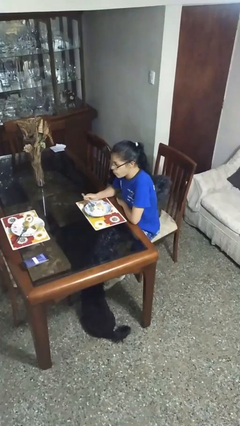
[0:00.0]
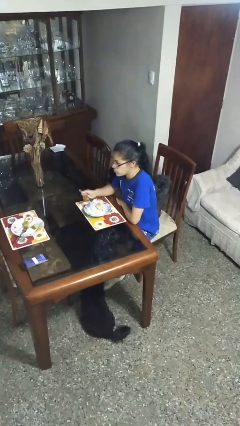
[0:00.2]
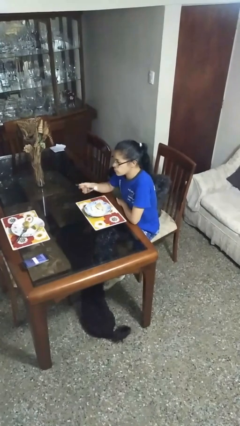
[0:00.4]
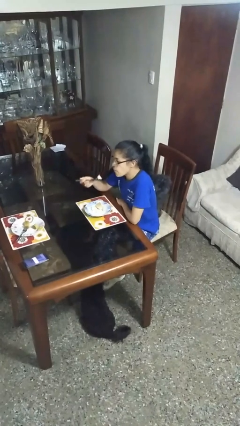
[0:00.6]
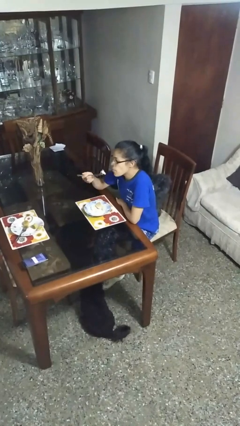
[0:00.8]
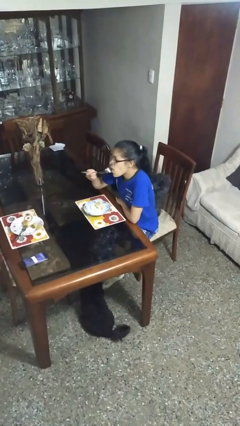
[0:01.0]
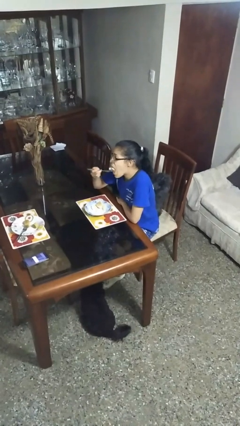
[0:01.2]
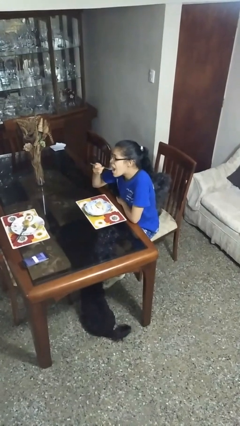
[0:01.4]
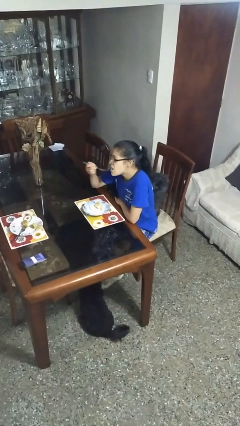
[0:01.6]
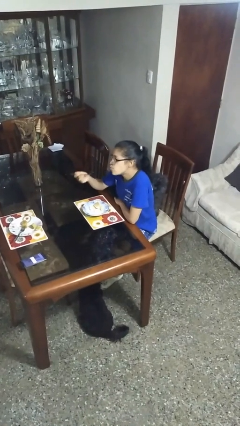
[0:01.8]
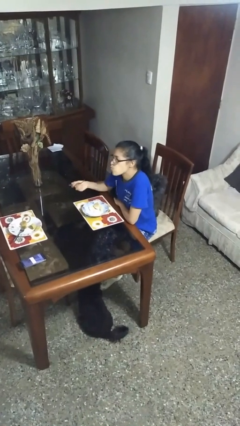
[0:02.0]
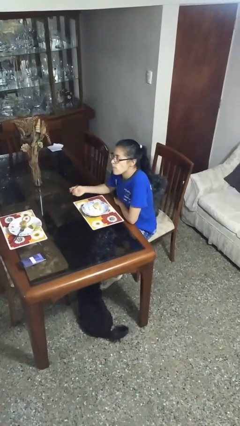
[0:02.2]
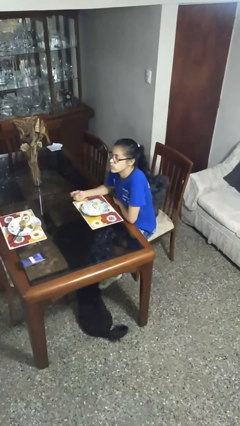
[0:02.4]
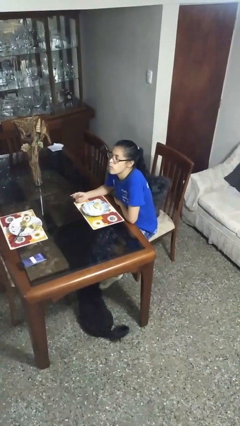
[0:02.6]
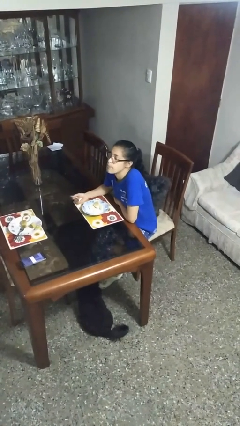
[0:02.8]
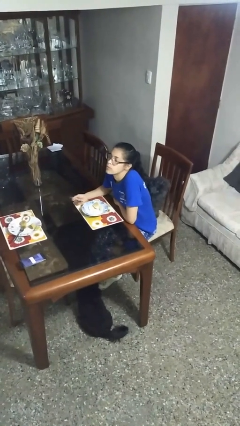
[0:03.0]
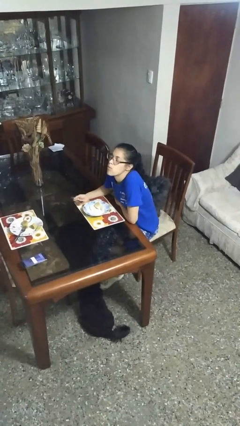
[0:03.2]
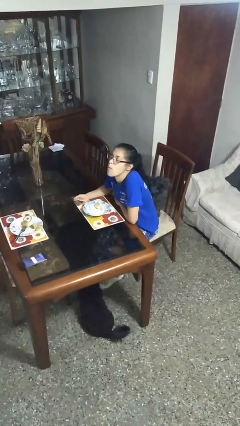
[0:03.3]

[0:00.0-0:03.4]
person eats with utensil

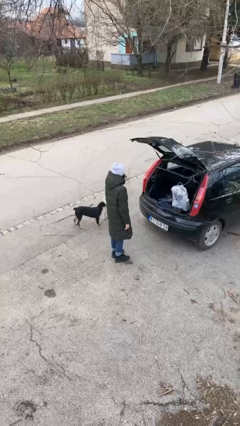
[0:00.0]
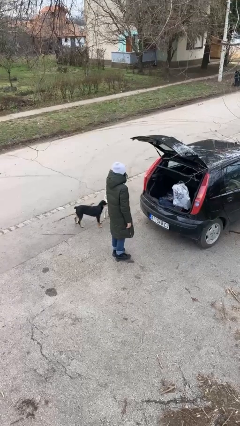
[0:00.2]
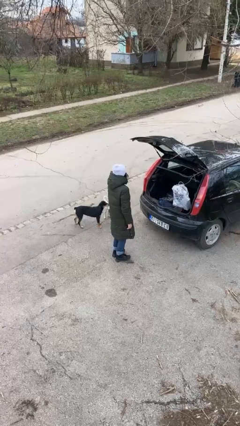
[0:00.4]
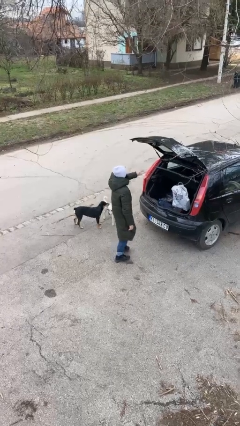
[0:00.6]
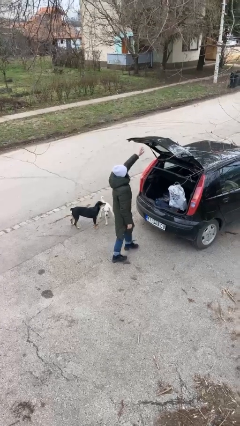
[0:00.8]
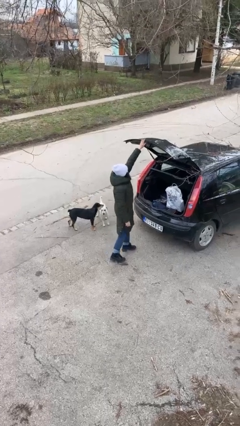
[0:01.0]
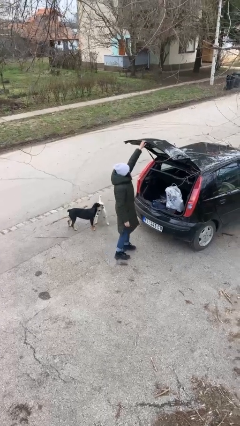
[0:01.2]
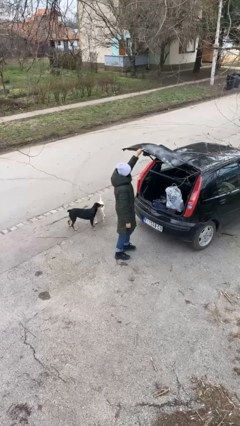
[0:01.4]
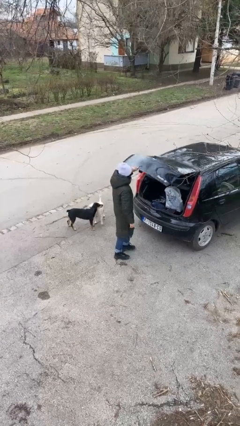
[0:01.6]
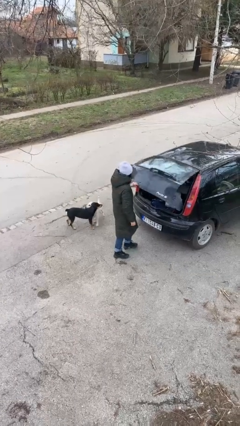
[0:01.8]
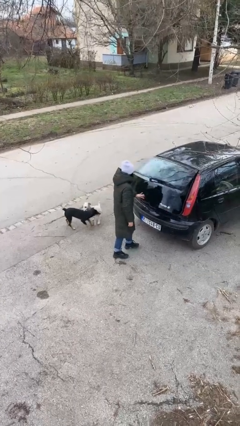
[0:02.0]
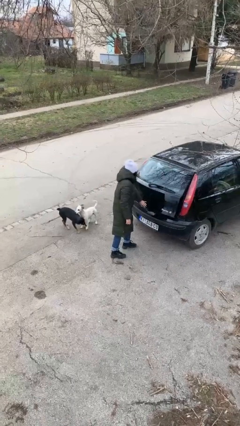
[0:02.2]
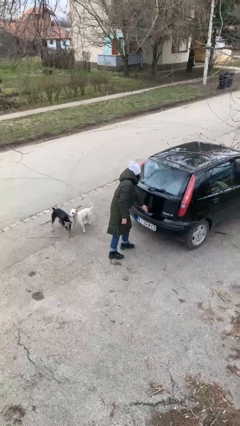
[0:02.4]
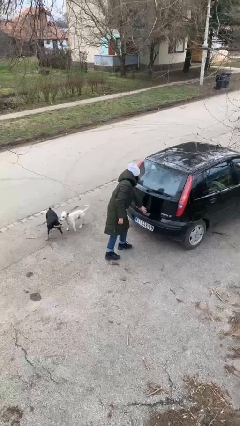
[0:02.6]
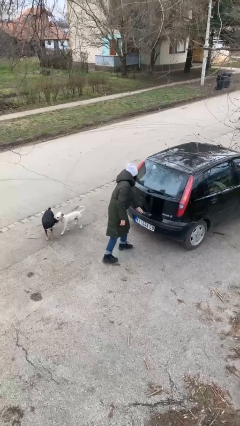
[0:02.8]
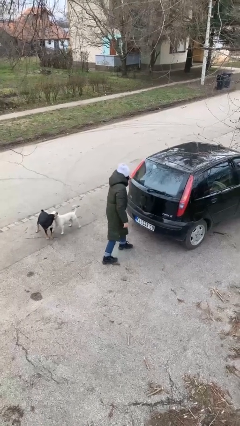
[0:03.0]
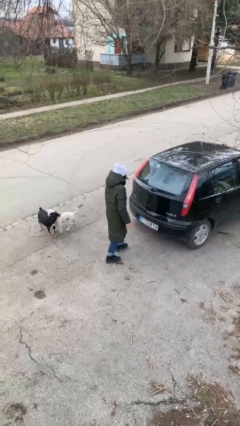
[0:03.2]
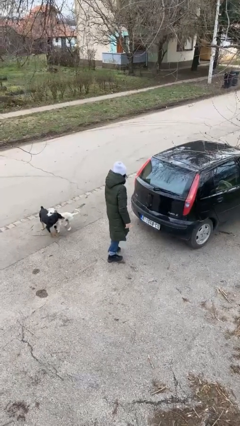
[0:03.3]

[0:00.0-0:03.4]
person closes car trunk

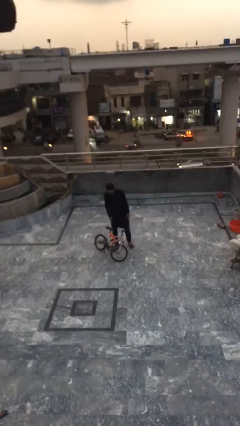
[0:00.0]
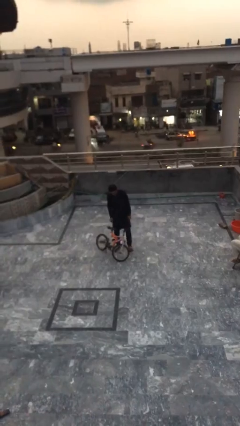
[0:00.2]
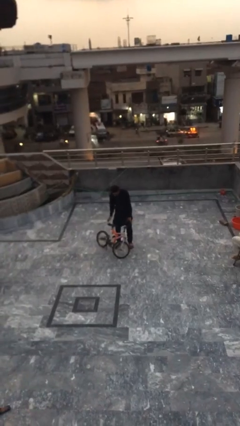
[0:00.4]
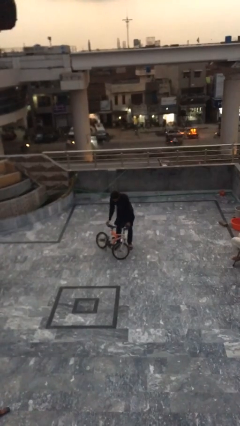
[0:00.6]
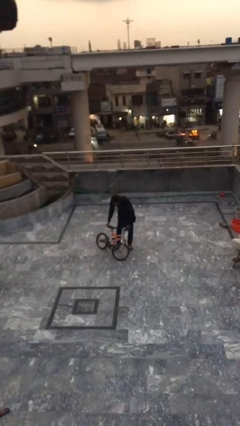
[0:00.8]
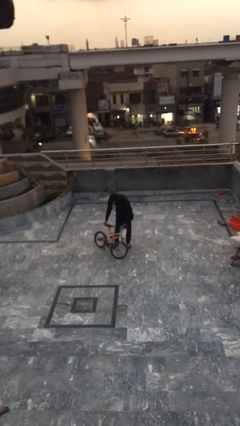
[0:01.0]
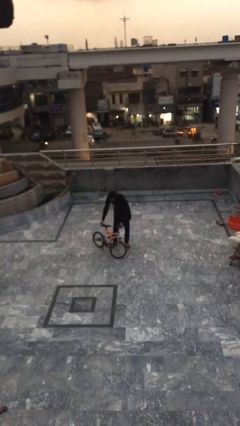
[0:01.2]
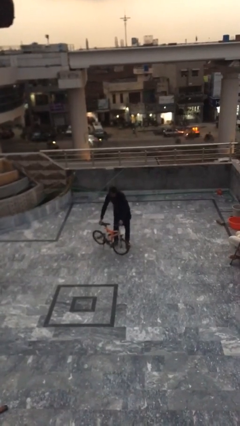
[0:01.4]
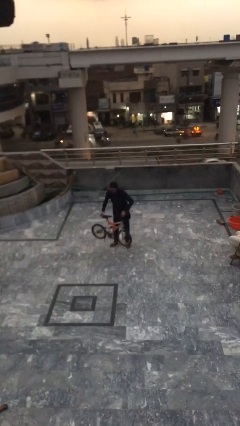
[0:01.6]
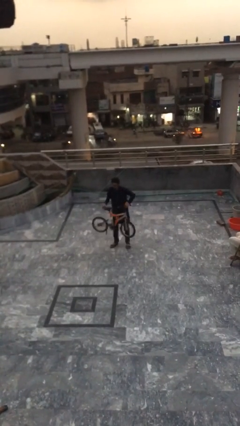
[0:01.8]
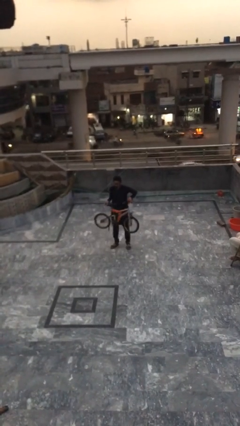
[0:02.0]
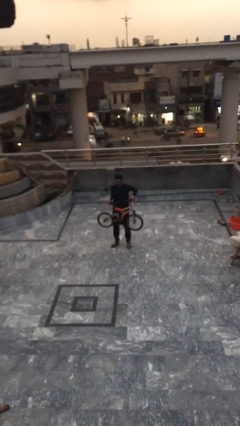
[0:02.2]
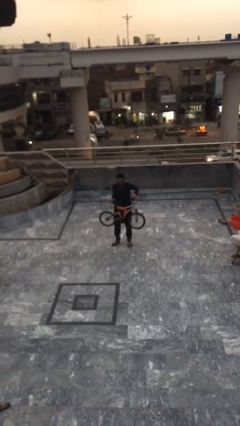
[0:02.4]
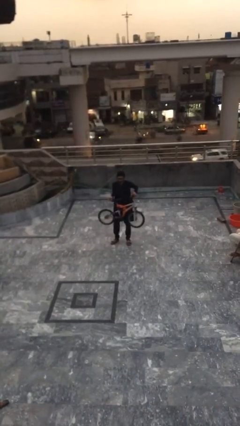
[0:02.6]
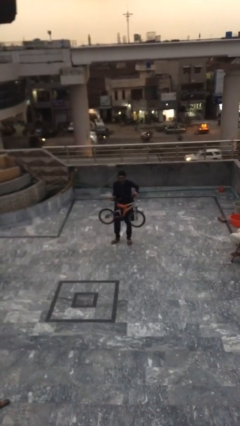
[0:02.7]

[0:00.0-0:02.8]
person picks up object from floor

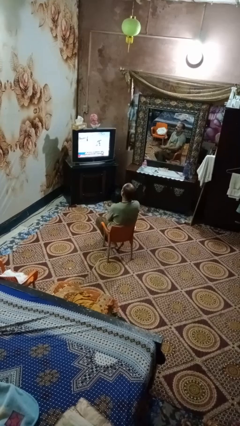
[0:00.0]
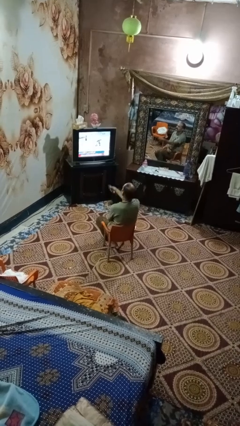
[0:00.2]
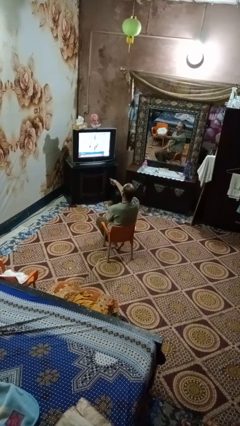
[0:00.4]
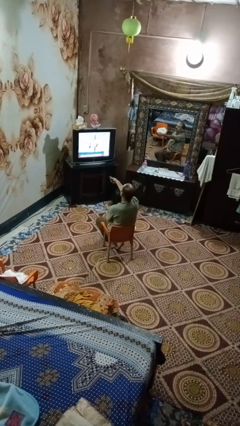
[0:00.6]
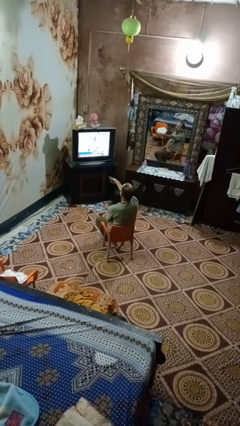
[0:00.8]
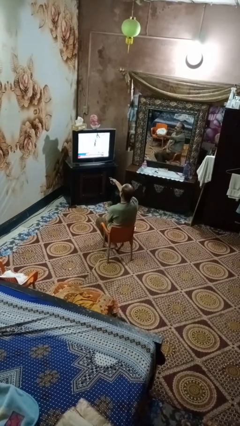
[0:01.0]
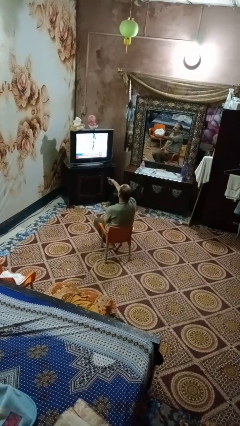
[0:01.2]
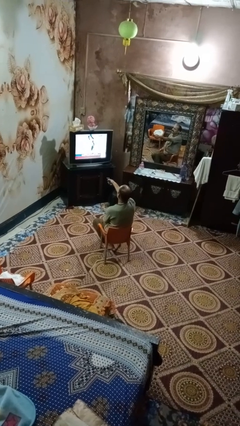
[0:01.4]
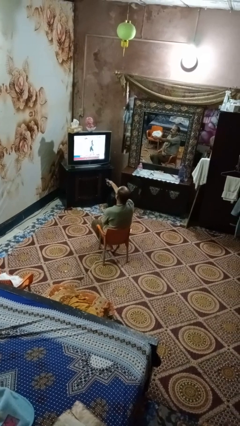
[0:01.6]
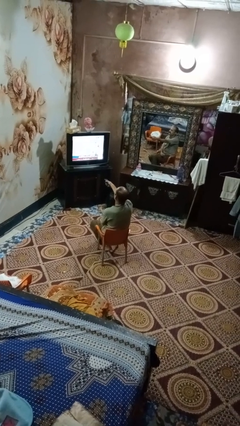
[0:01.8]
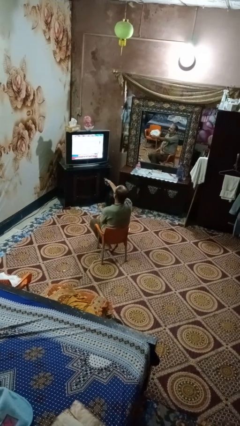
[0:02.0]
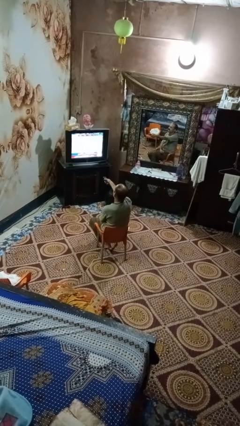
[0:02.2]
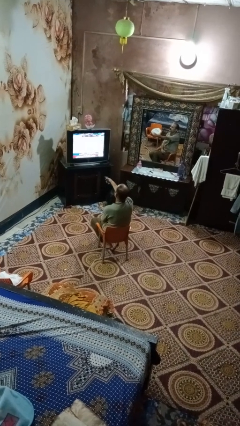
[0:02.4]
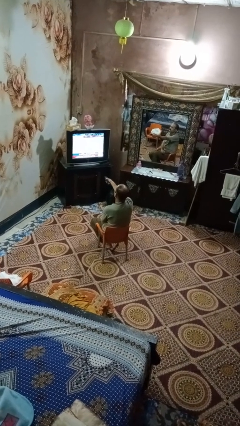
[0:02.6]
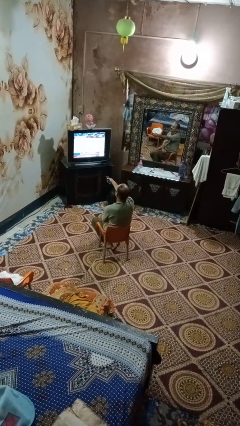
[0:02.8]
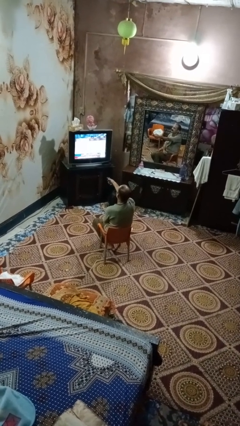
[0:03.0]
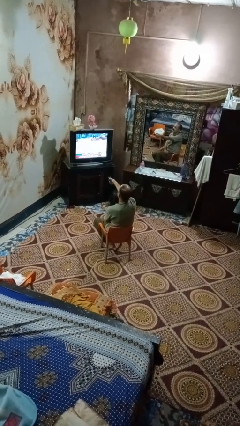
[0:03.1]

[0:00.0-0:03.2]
person uses television remote

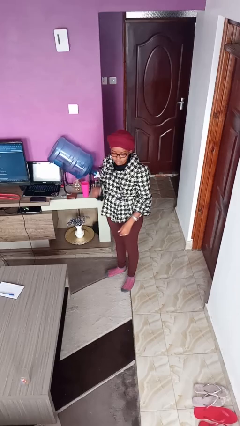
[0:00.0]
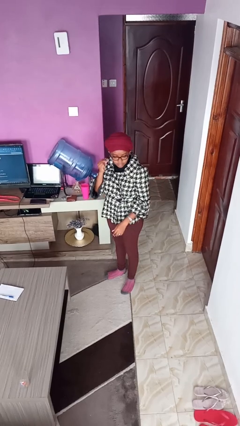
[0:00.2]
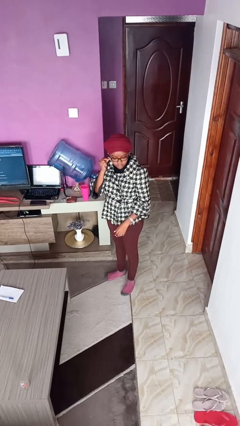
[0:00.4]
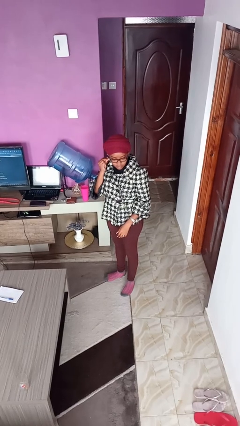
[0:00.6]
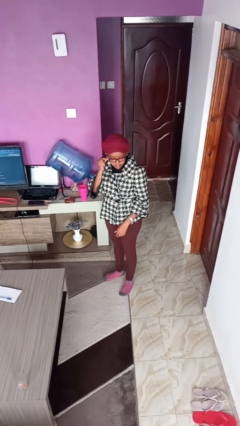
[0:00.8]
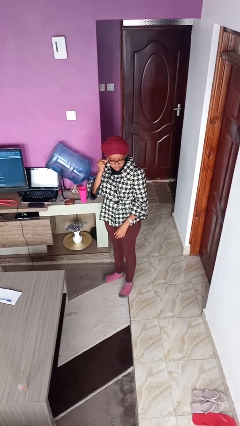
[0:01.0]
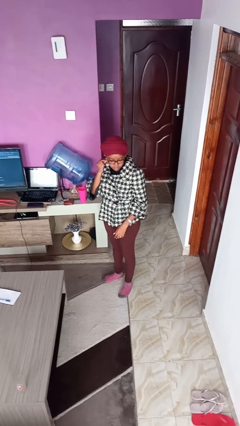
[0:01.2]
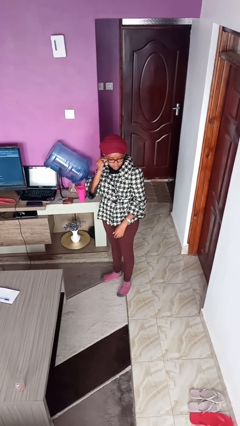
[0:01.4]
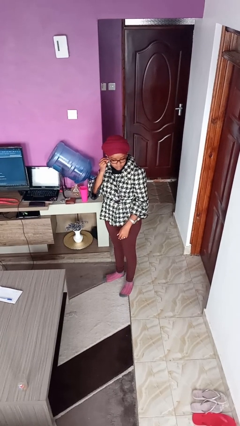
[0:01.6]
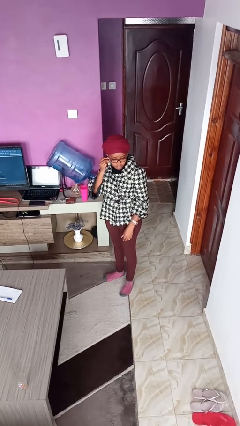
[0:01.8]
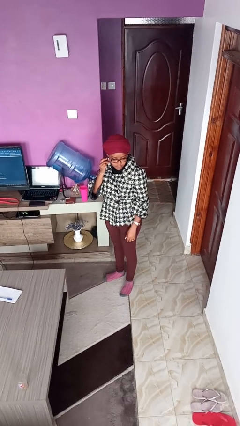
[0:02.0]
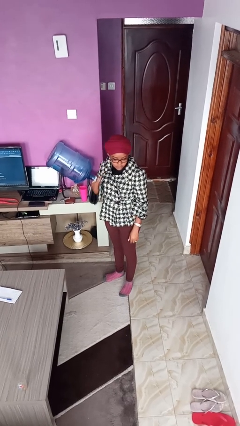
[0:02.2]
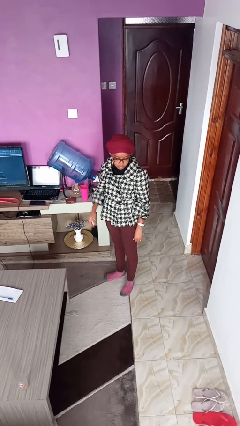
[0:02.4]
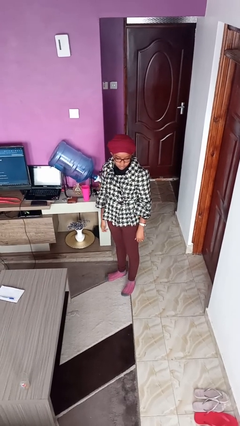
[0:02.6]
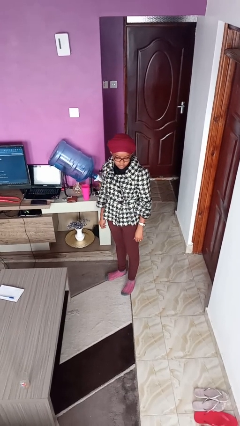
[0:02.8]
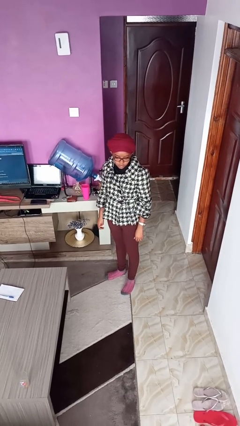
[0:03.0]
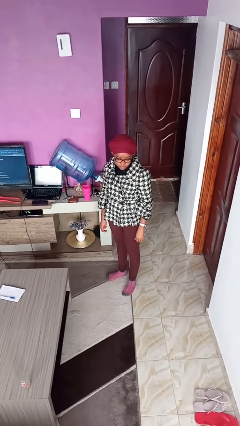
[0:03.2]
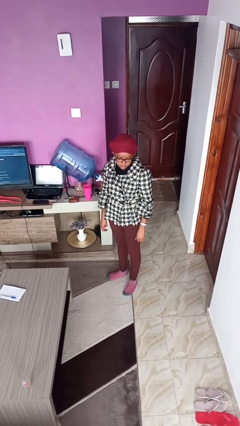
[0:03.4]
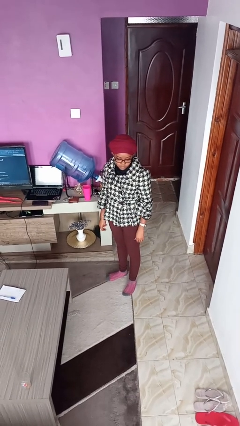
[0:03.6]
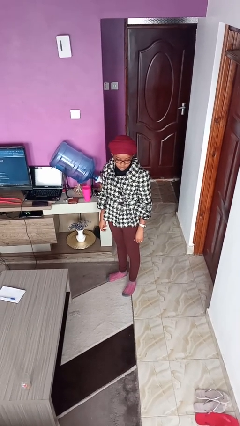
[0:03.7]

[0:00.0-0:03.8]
person puts on earrings

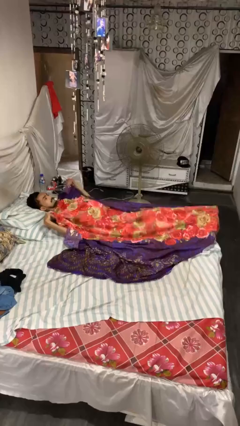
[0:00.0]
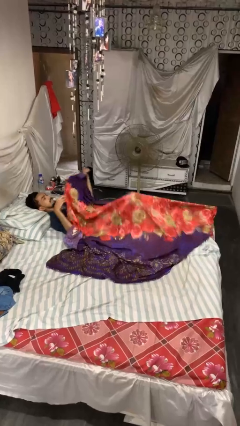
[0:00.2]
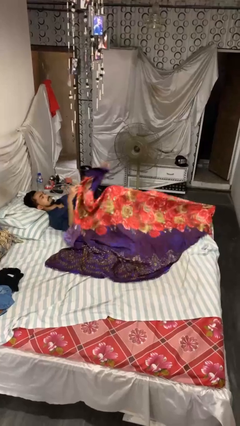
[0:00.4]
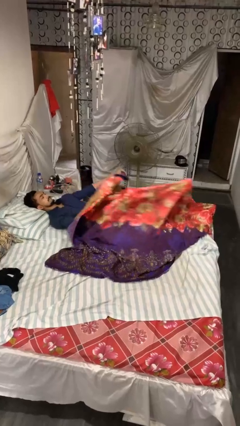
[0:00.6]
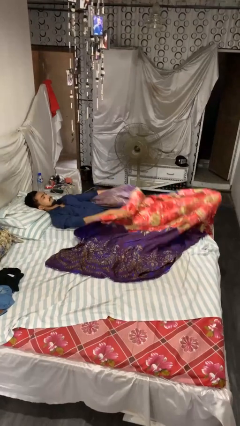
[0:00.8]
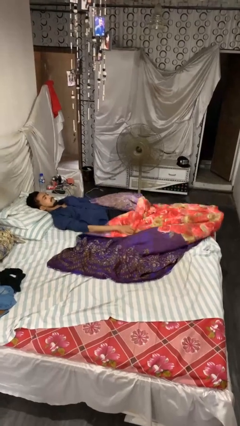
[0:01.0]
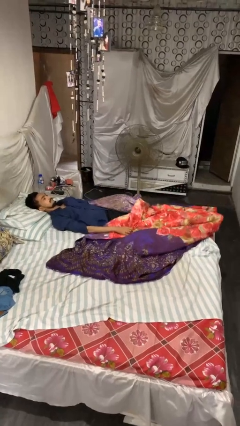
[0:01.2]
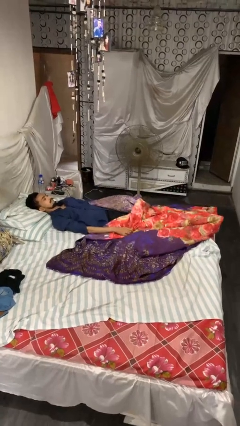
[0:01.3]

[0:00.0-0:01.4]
person uncovers with bedsheets
